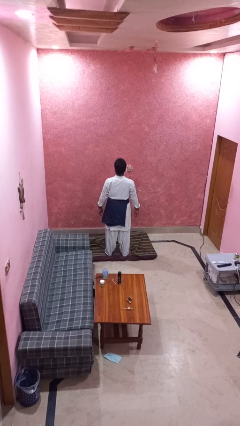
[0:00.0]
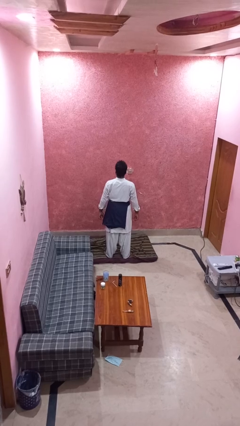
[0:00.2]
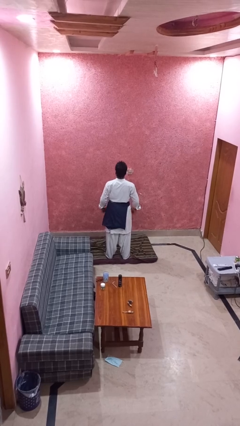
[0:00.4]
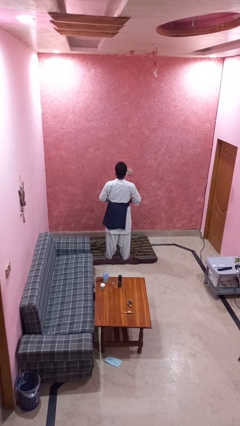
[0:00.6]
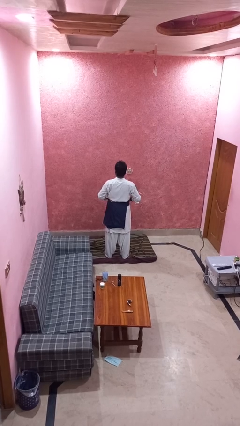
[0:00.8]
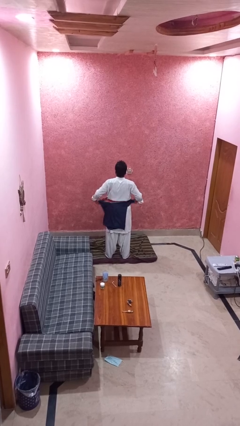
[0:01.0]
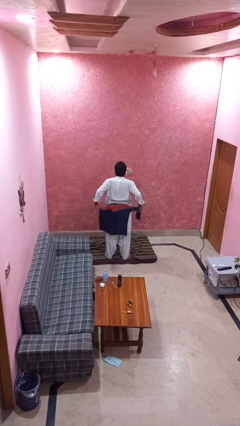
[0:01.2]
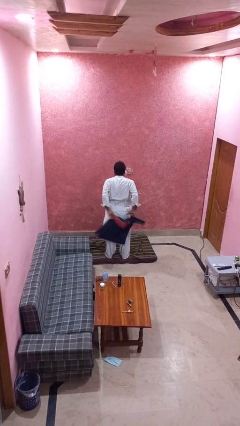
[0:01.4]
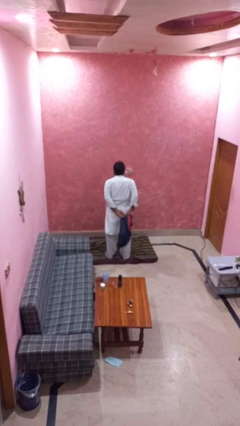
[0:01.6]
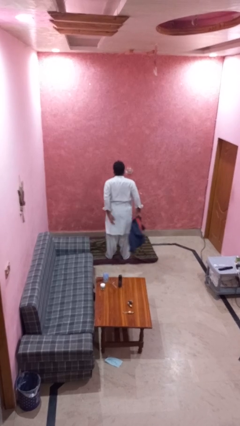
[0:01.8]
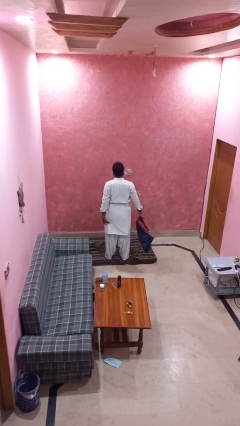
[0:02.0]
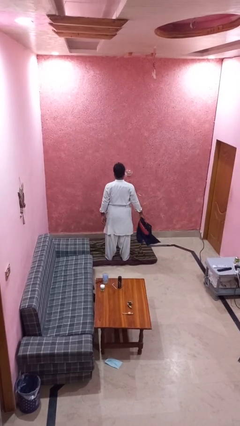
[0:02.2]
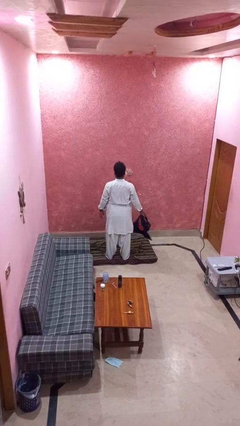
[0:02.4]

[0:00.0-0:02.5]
person unties jacket around waist

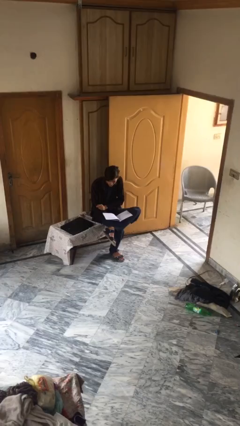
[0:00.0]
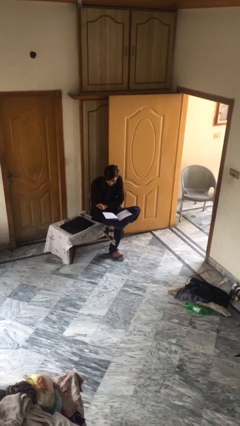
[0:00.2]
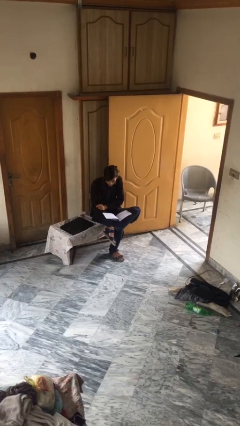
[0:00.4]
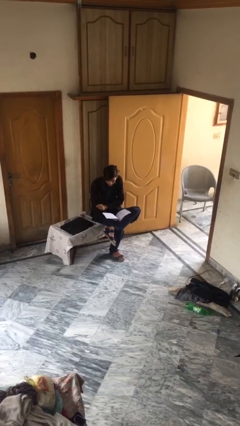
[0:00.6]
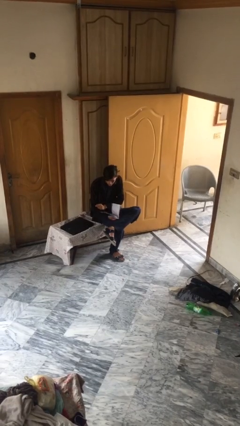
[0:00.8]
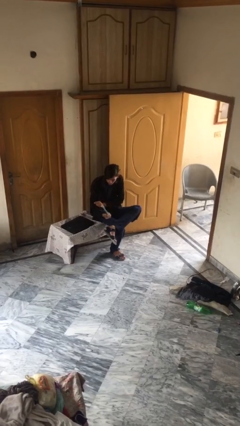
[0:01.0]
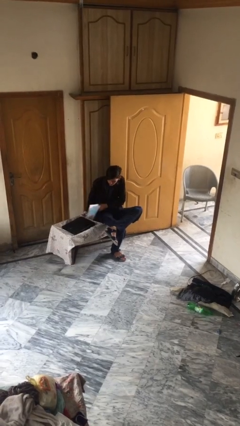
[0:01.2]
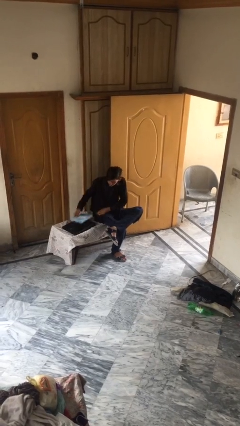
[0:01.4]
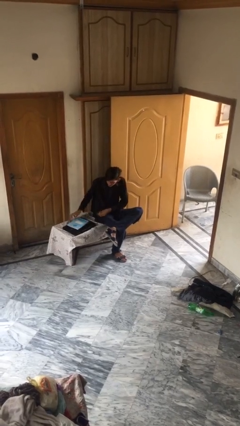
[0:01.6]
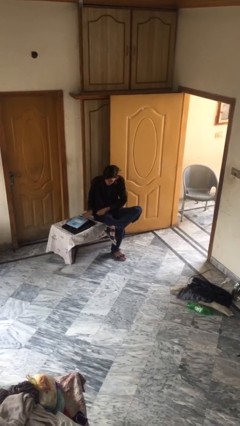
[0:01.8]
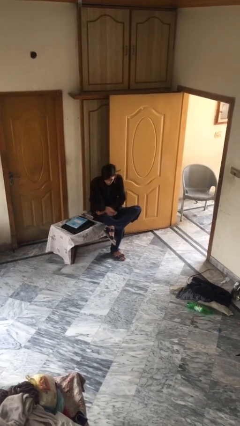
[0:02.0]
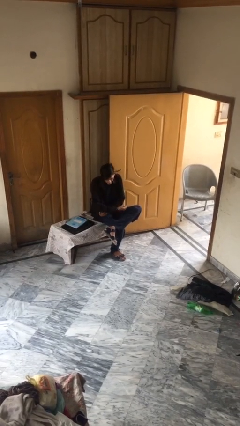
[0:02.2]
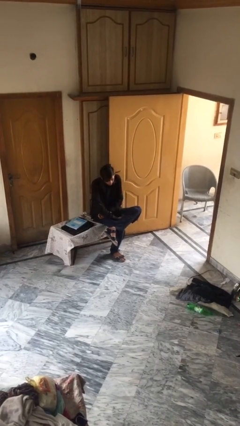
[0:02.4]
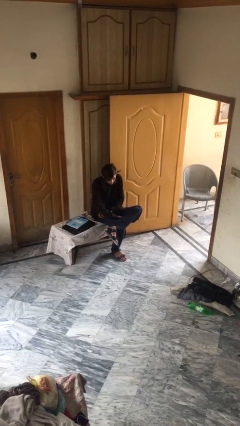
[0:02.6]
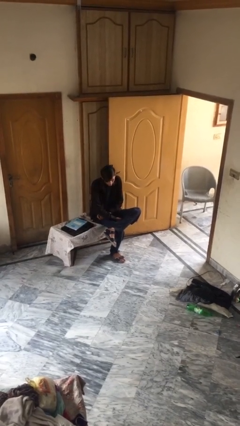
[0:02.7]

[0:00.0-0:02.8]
person puts down object on table

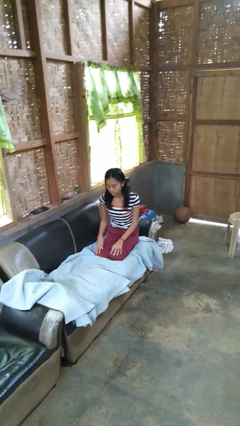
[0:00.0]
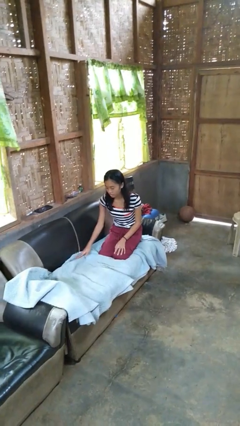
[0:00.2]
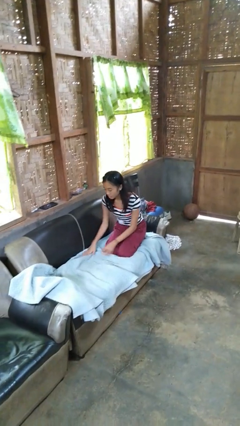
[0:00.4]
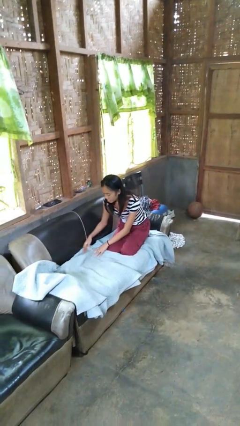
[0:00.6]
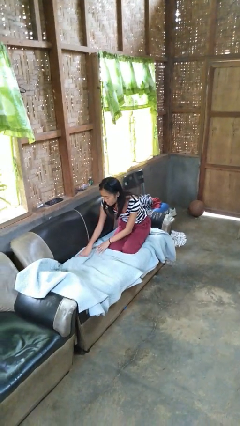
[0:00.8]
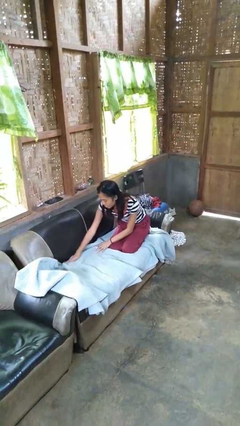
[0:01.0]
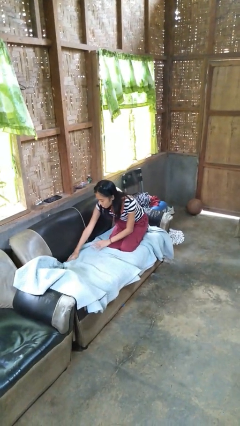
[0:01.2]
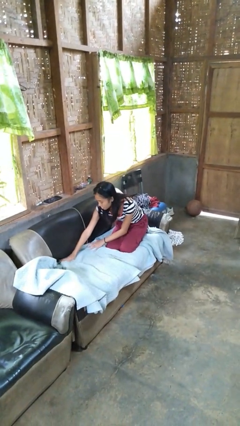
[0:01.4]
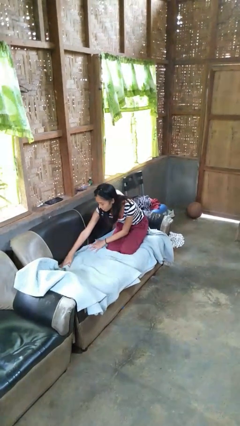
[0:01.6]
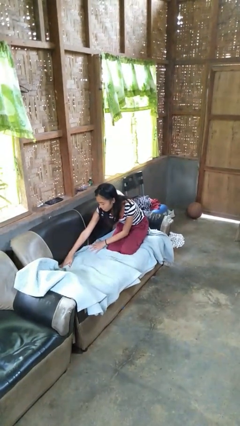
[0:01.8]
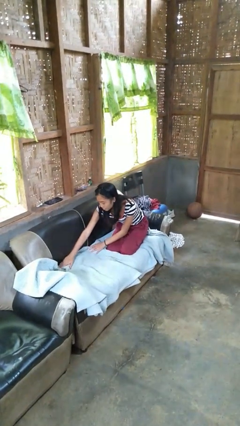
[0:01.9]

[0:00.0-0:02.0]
person searches in couch

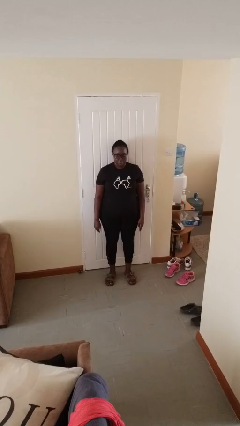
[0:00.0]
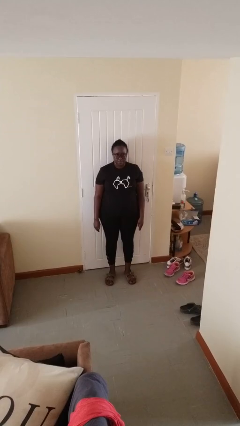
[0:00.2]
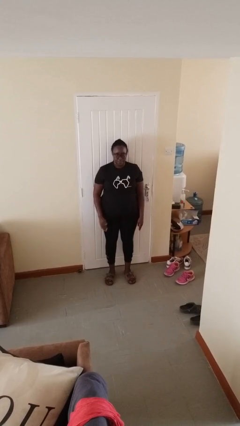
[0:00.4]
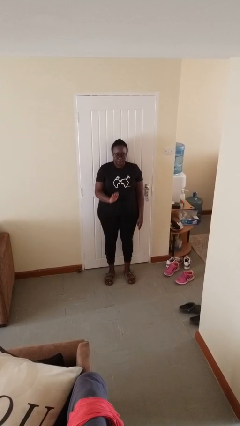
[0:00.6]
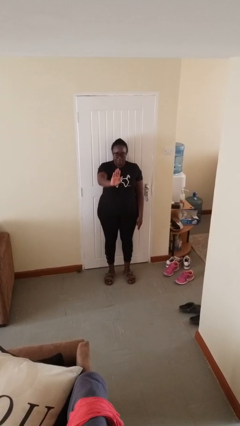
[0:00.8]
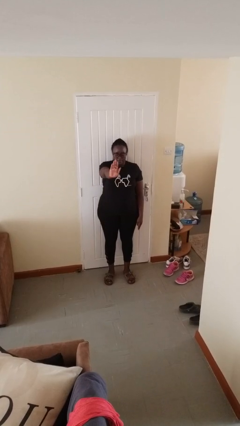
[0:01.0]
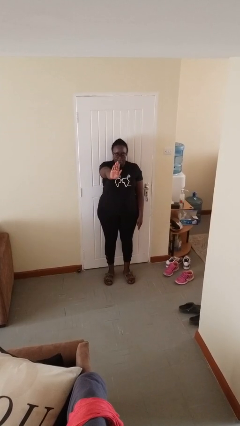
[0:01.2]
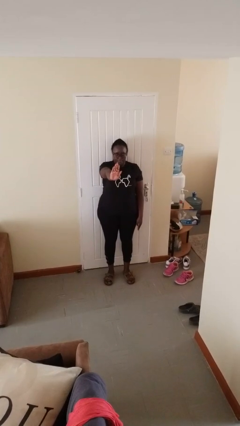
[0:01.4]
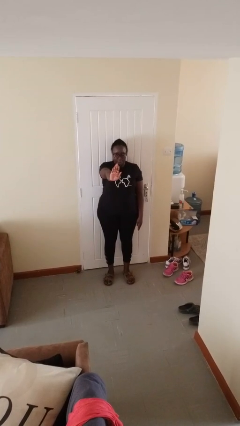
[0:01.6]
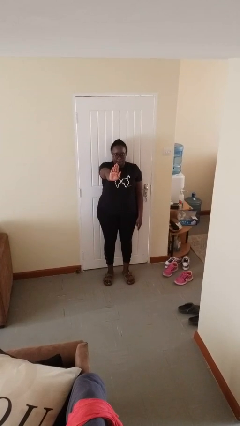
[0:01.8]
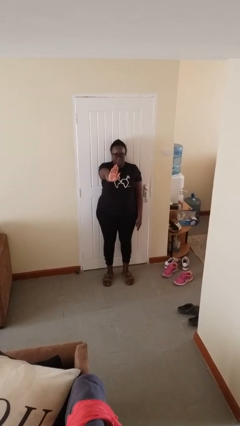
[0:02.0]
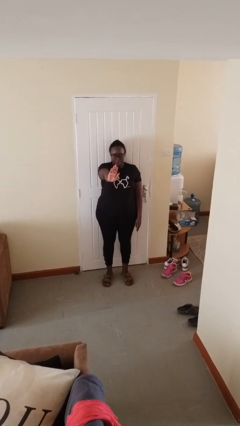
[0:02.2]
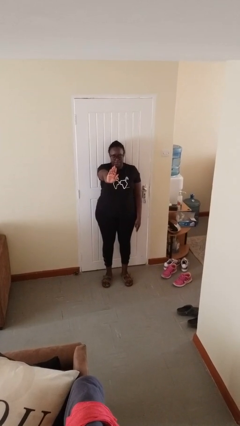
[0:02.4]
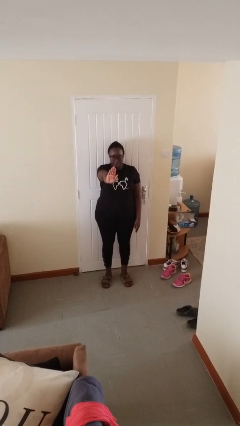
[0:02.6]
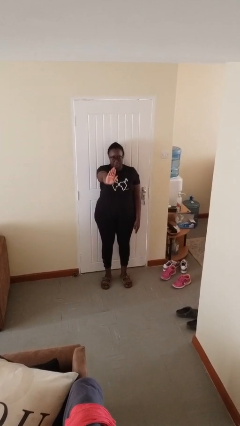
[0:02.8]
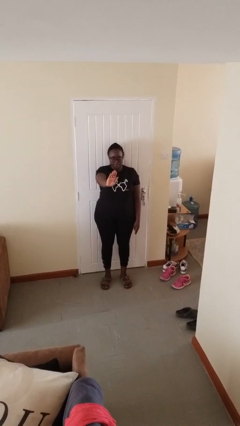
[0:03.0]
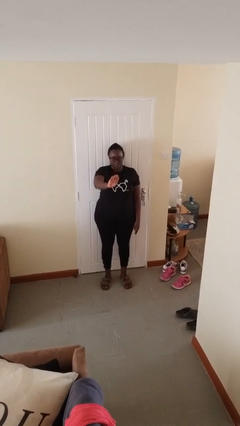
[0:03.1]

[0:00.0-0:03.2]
person gestures stop

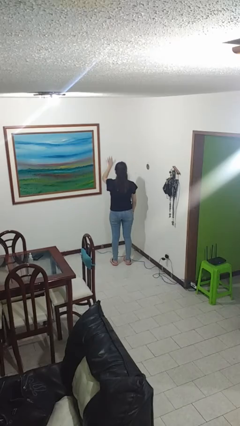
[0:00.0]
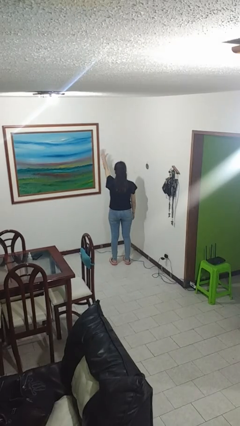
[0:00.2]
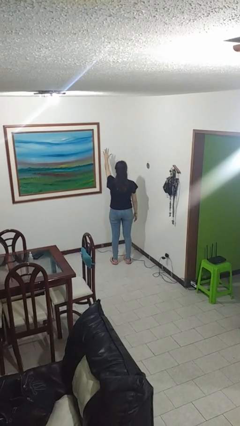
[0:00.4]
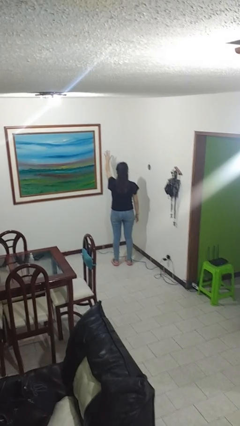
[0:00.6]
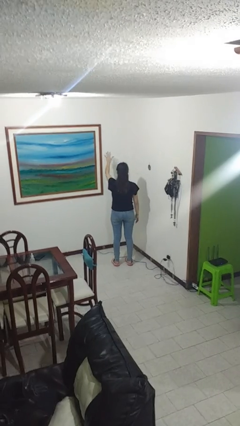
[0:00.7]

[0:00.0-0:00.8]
person gestures number five

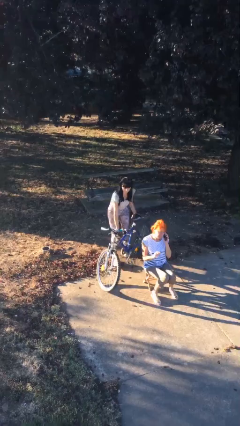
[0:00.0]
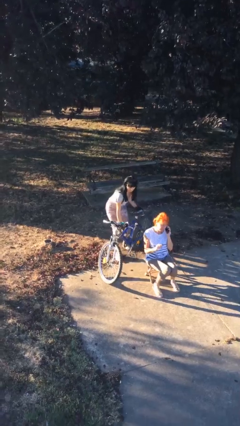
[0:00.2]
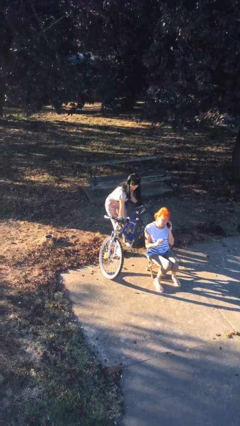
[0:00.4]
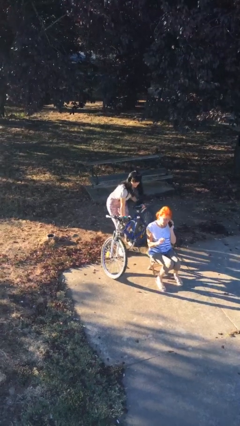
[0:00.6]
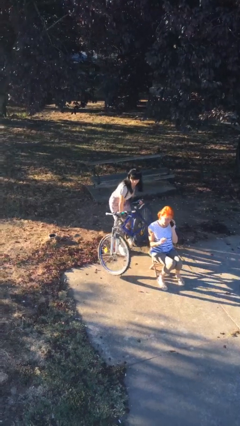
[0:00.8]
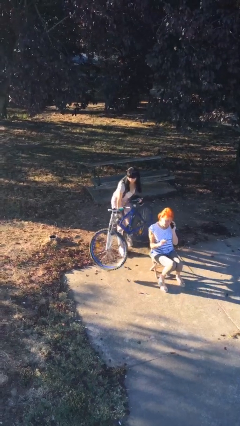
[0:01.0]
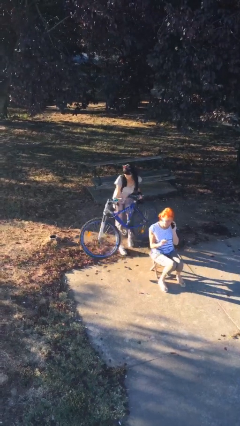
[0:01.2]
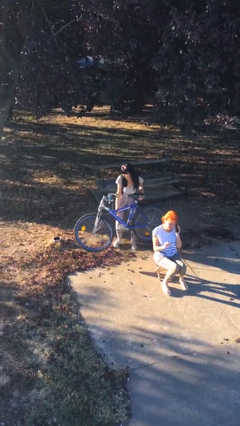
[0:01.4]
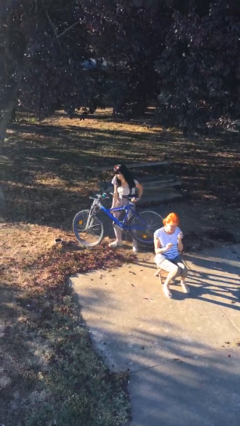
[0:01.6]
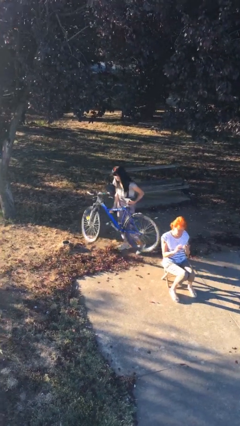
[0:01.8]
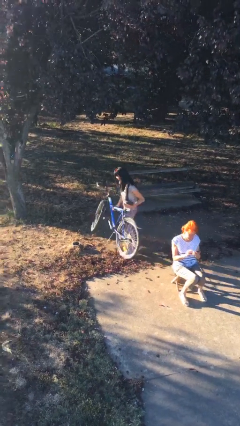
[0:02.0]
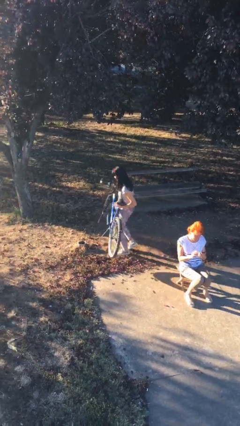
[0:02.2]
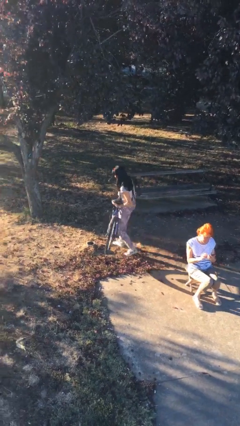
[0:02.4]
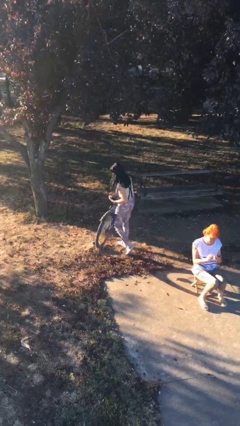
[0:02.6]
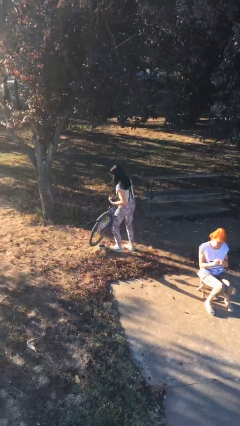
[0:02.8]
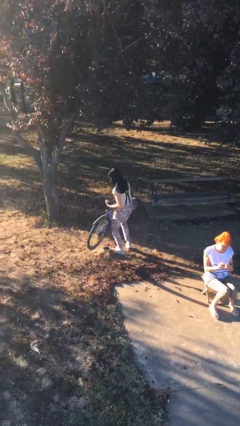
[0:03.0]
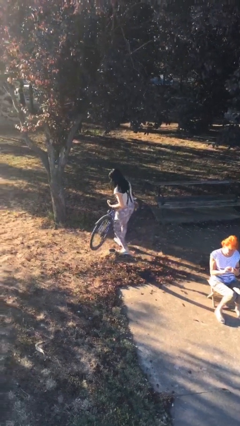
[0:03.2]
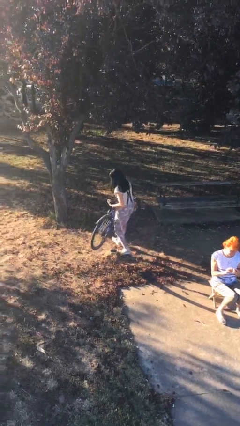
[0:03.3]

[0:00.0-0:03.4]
person steals object from person

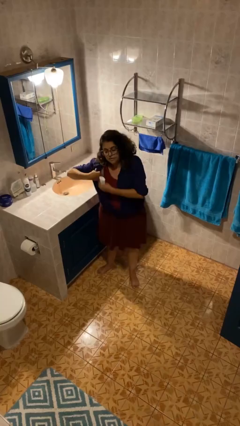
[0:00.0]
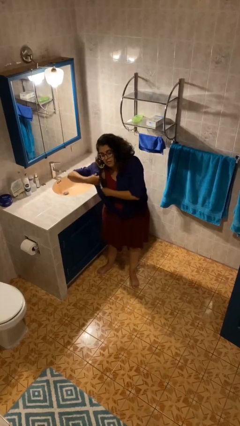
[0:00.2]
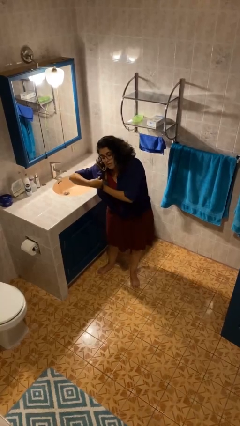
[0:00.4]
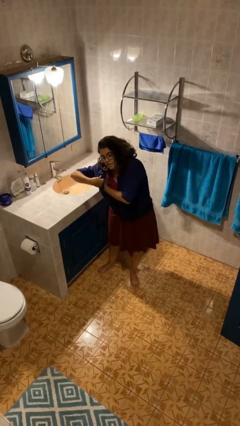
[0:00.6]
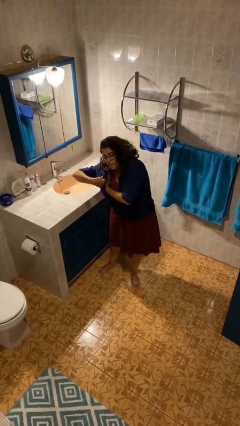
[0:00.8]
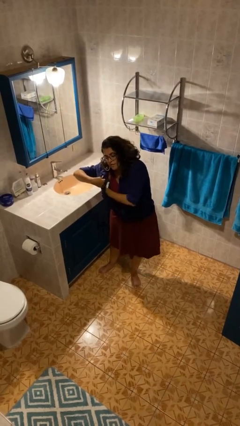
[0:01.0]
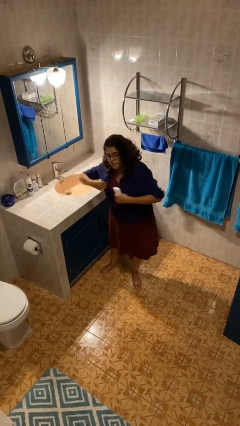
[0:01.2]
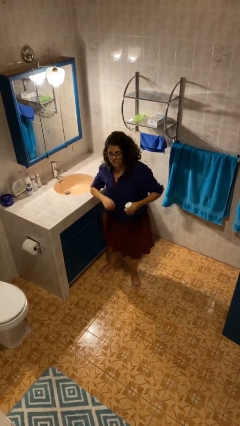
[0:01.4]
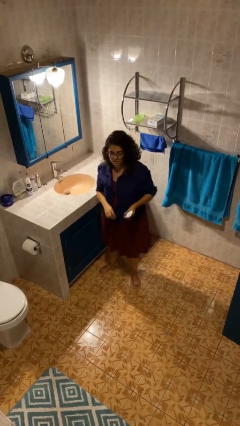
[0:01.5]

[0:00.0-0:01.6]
person applies deodorant

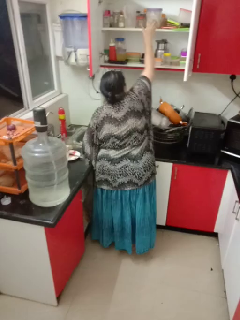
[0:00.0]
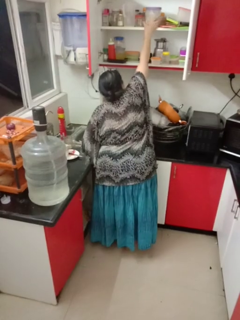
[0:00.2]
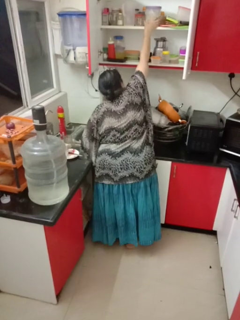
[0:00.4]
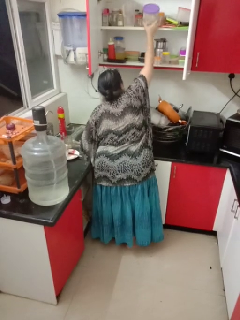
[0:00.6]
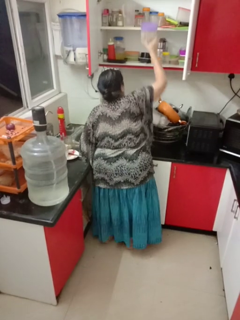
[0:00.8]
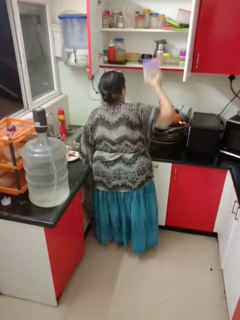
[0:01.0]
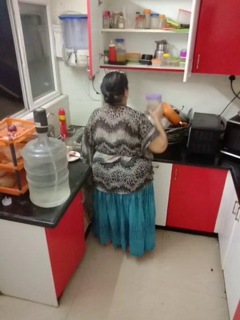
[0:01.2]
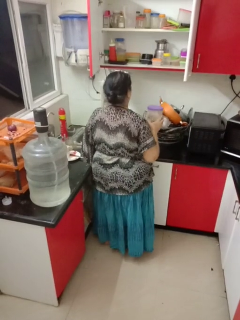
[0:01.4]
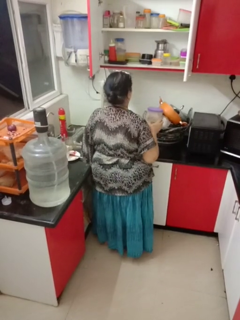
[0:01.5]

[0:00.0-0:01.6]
person takes object from cabinet
